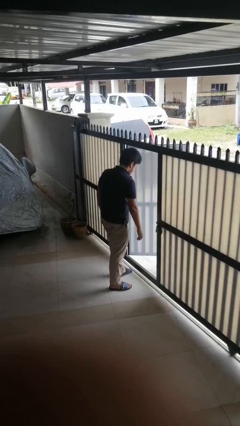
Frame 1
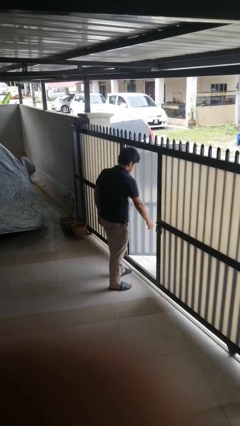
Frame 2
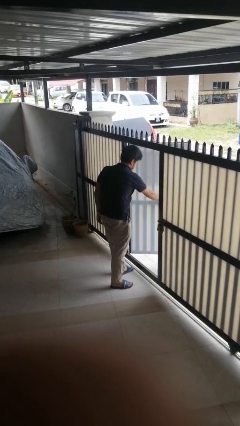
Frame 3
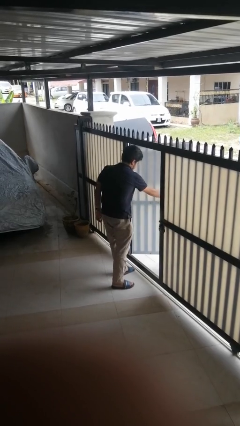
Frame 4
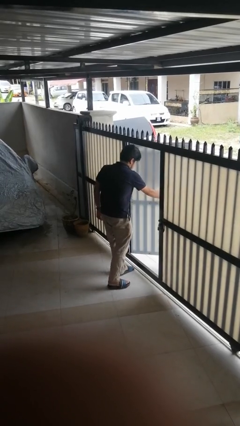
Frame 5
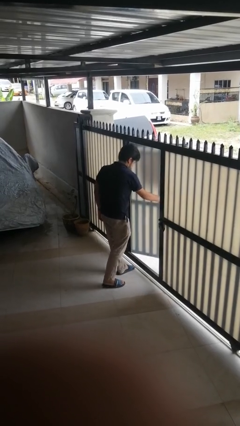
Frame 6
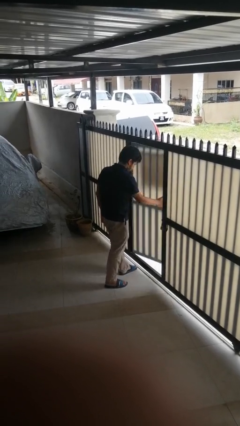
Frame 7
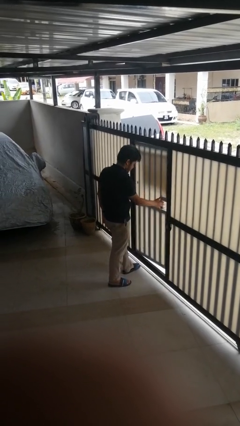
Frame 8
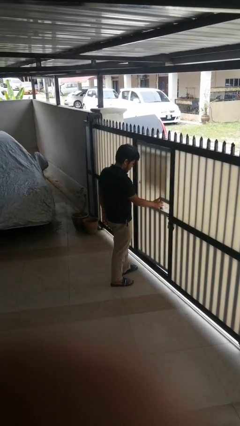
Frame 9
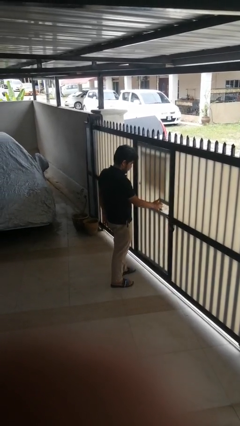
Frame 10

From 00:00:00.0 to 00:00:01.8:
person closes gate

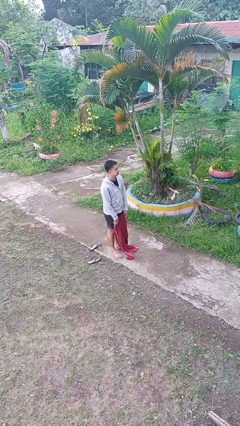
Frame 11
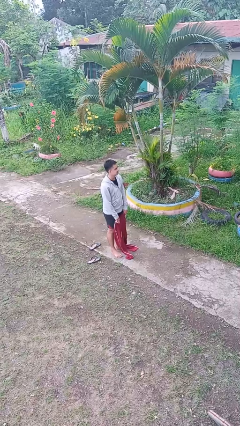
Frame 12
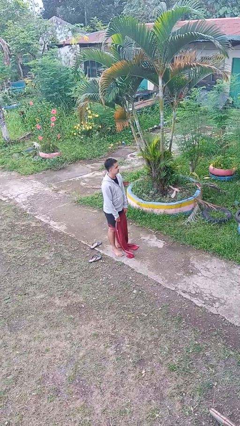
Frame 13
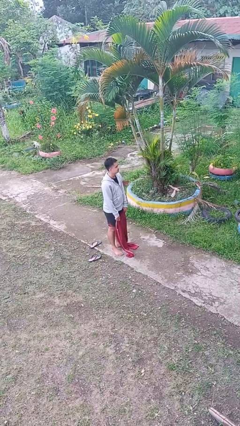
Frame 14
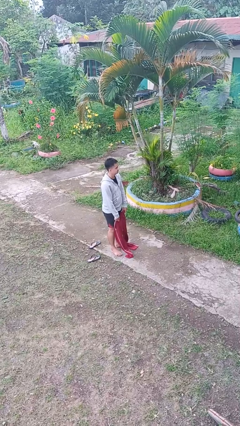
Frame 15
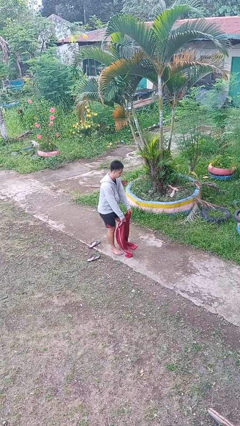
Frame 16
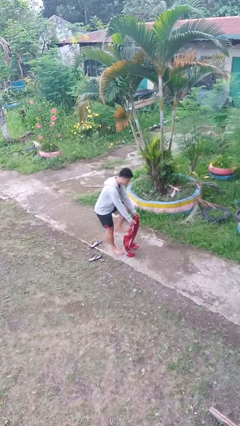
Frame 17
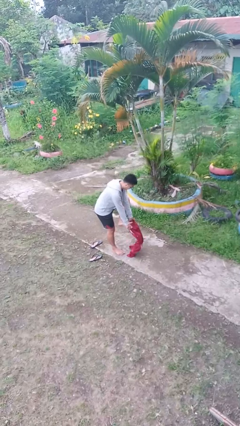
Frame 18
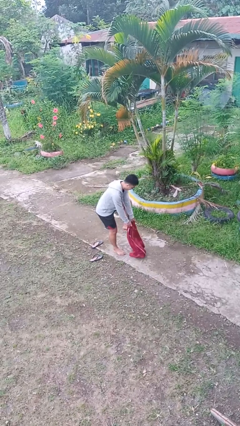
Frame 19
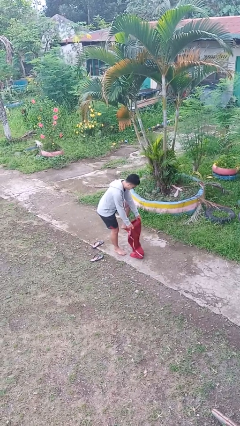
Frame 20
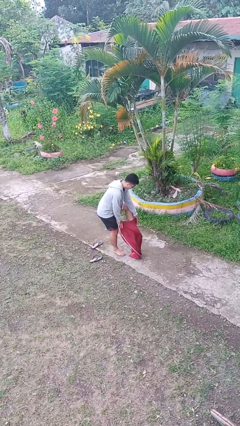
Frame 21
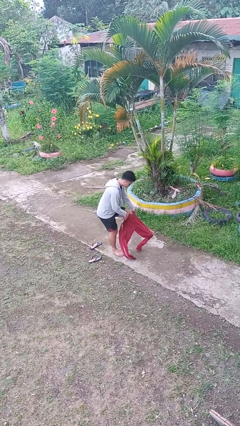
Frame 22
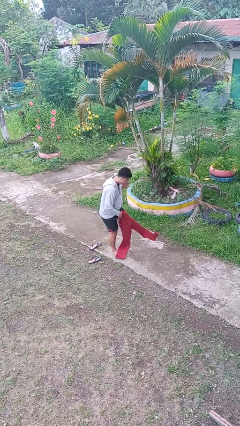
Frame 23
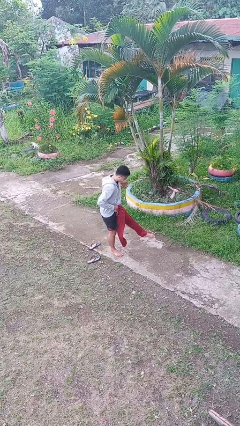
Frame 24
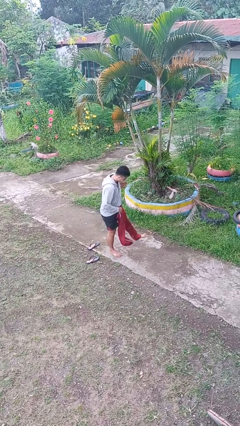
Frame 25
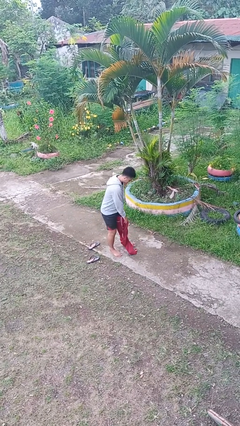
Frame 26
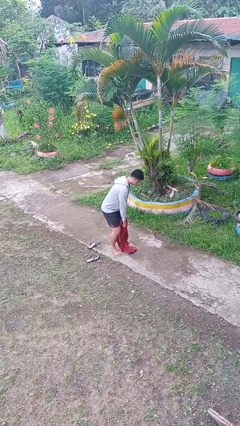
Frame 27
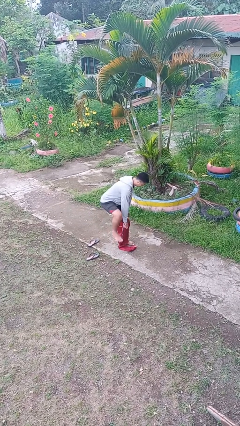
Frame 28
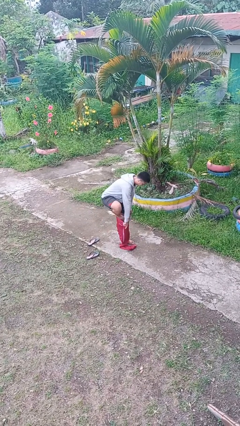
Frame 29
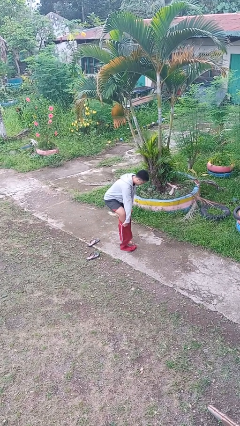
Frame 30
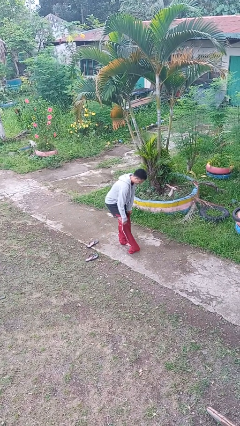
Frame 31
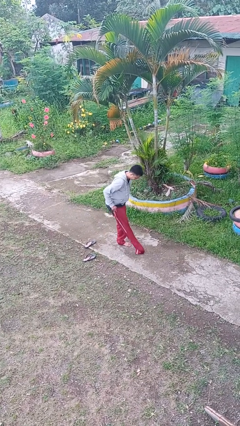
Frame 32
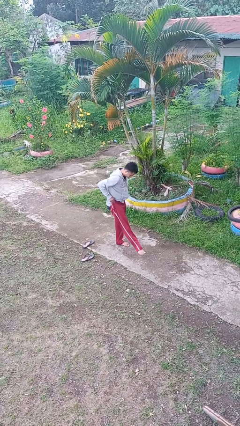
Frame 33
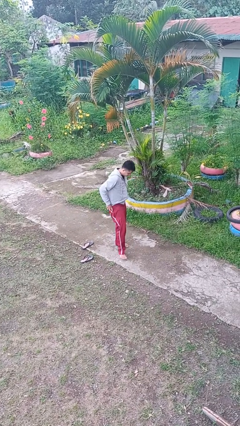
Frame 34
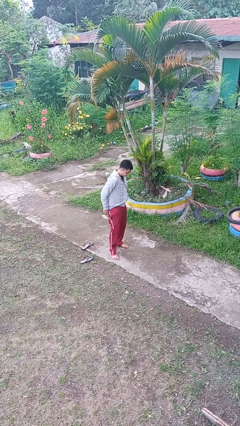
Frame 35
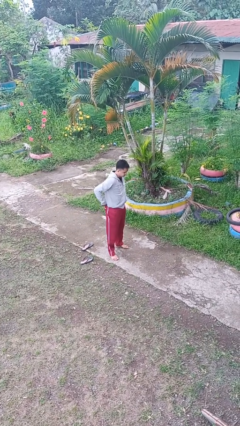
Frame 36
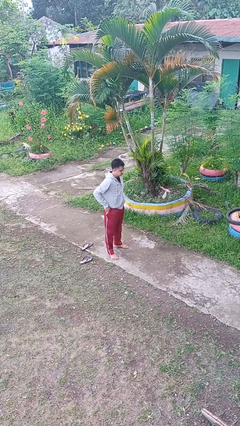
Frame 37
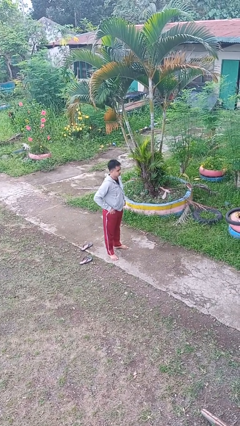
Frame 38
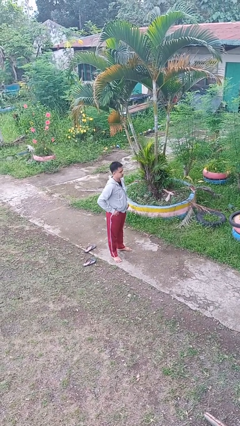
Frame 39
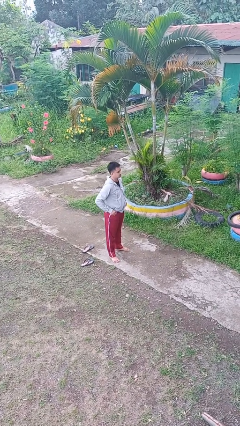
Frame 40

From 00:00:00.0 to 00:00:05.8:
person takes off pants

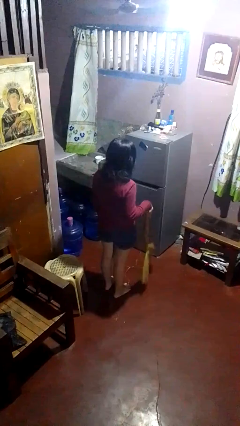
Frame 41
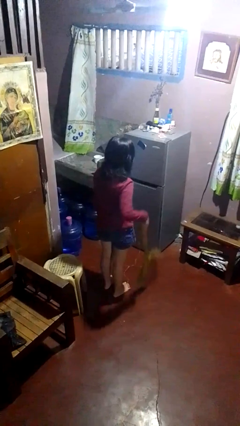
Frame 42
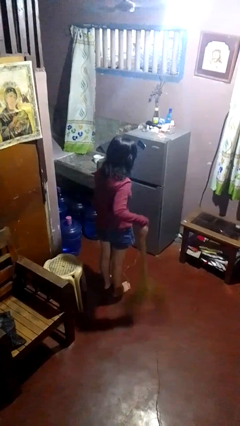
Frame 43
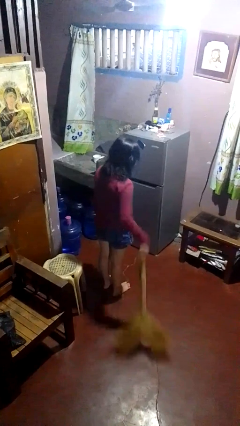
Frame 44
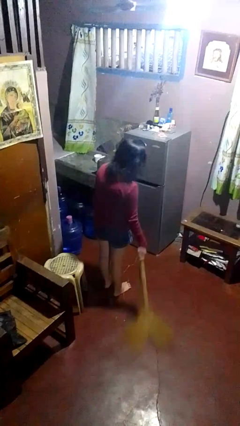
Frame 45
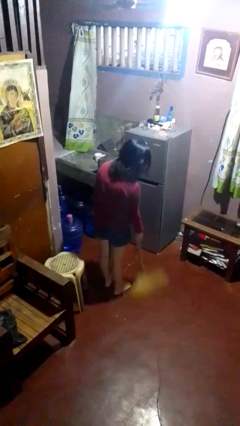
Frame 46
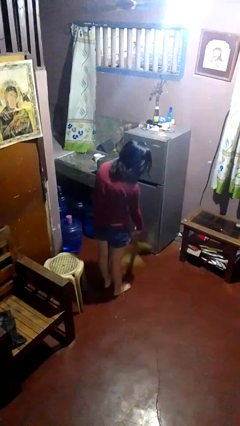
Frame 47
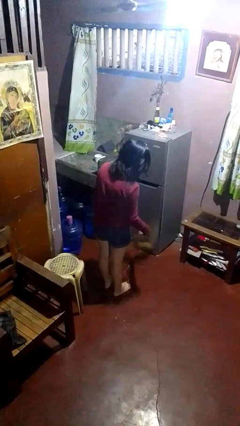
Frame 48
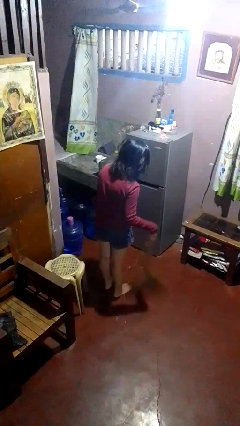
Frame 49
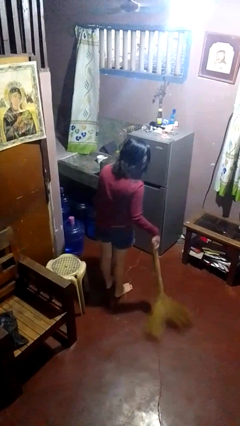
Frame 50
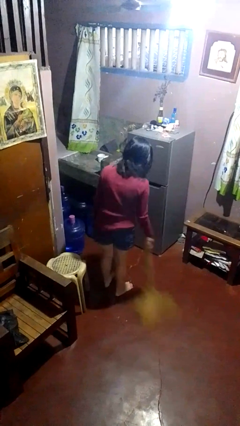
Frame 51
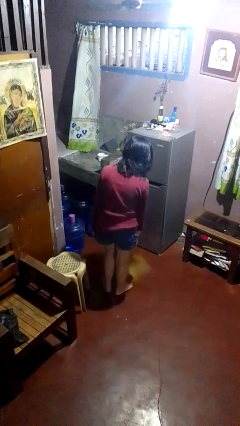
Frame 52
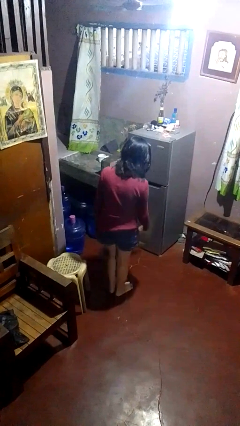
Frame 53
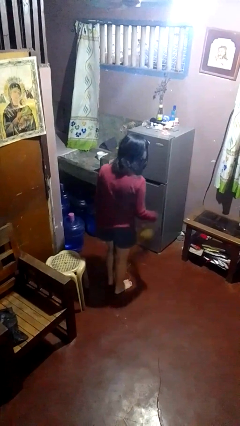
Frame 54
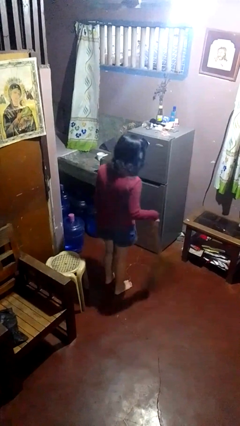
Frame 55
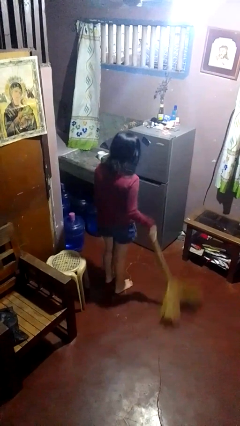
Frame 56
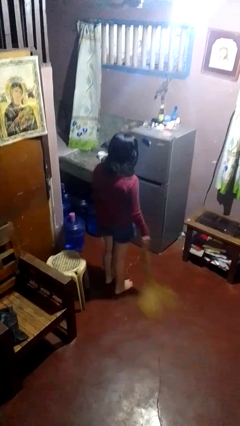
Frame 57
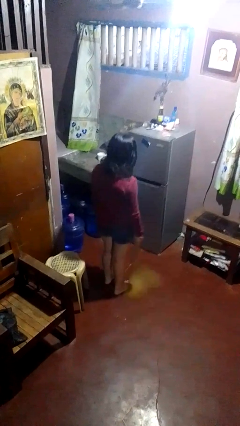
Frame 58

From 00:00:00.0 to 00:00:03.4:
person sweeps floor

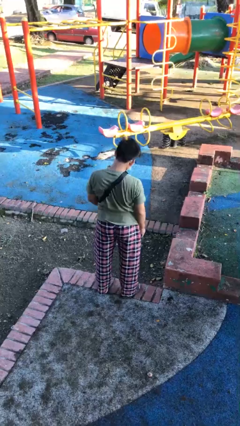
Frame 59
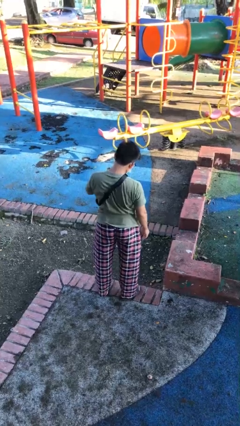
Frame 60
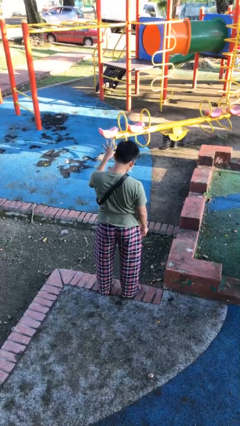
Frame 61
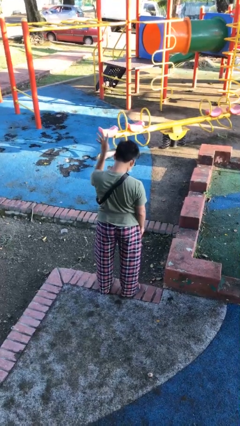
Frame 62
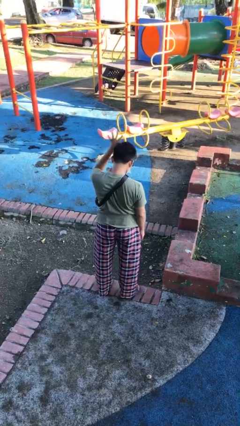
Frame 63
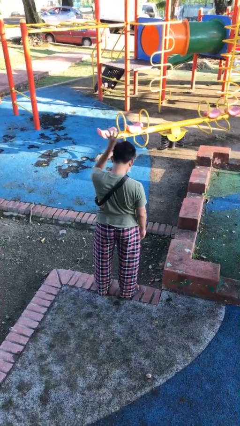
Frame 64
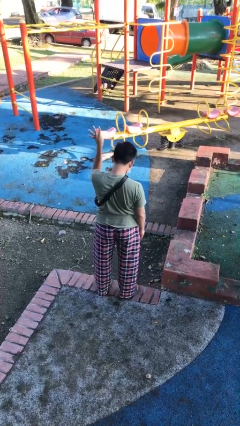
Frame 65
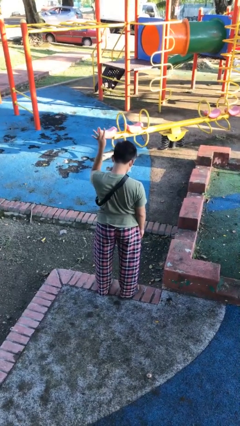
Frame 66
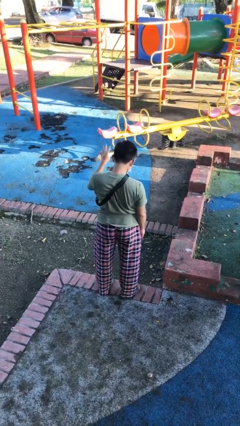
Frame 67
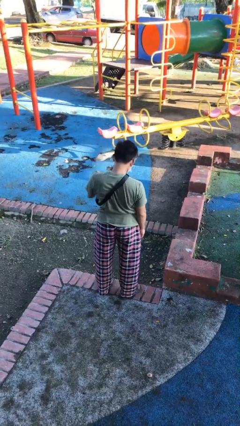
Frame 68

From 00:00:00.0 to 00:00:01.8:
person gestures number four

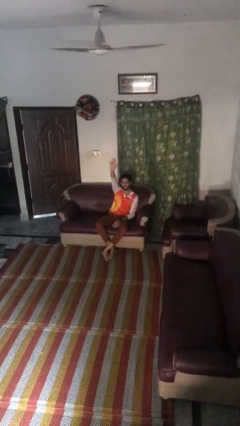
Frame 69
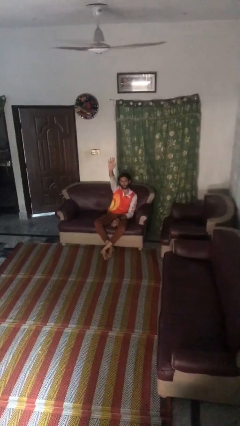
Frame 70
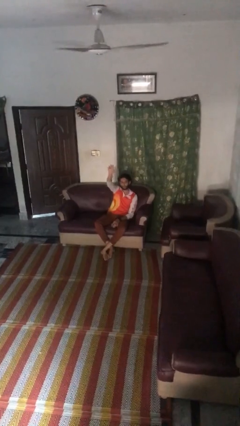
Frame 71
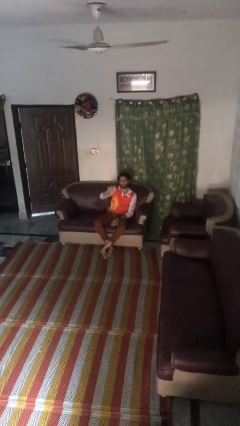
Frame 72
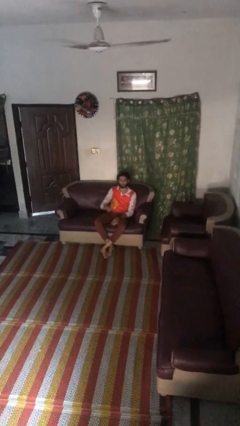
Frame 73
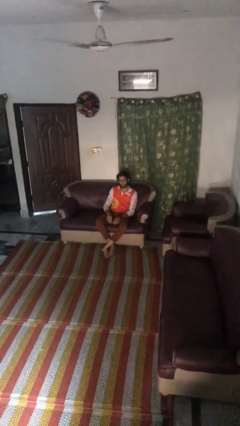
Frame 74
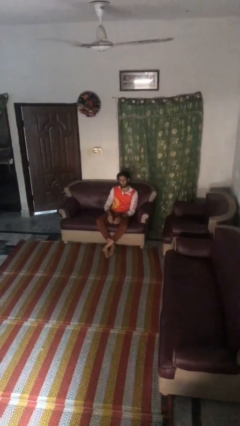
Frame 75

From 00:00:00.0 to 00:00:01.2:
person gestures lower hand

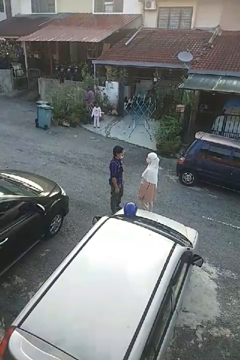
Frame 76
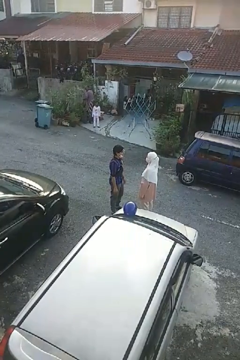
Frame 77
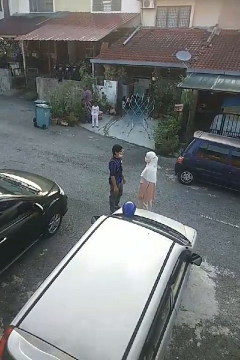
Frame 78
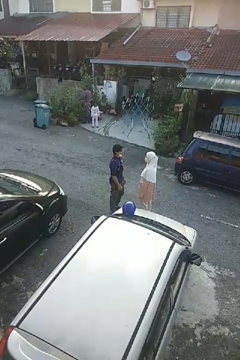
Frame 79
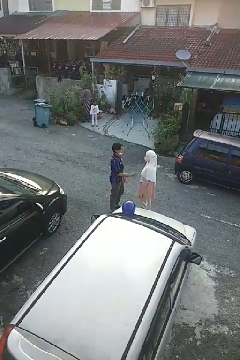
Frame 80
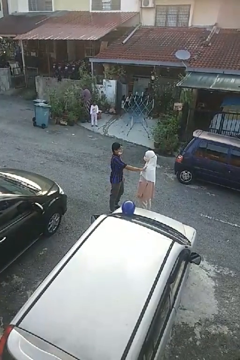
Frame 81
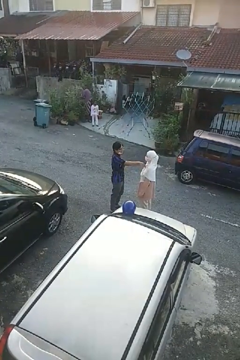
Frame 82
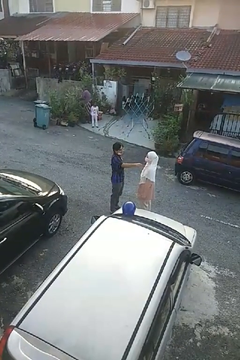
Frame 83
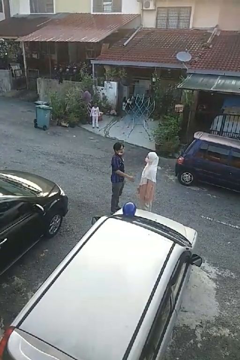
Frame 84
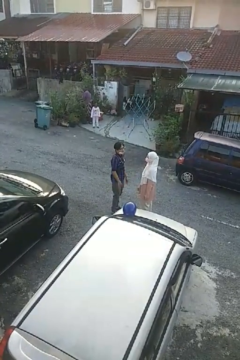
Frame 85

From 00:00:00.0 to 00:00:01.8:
person shoves person

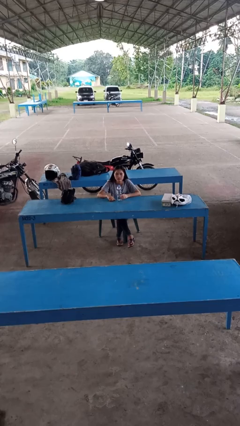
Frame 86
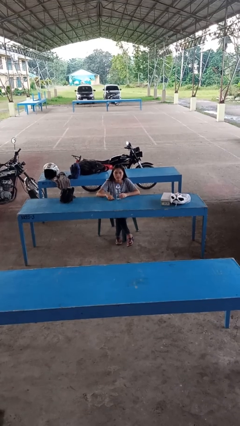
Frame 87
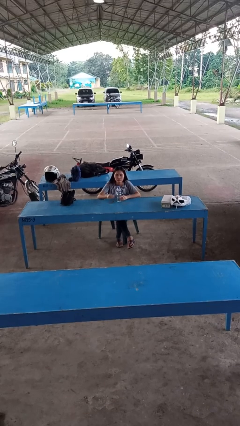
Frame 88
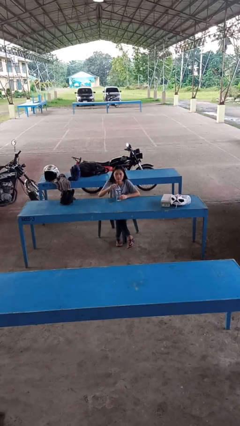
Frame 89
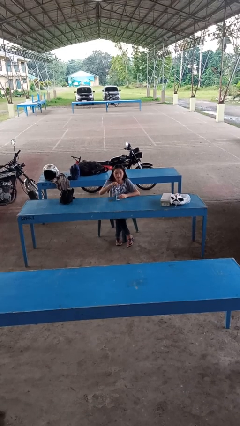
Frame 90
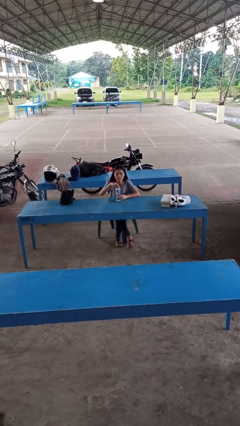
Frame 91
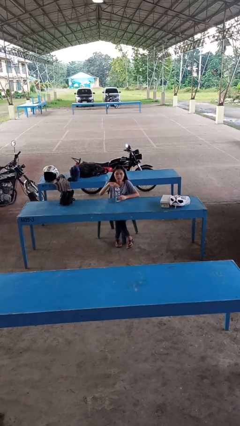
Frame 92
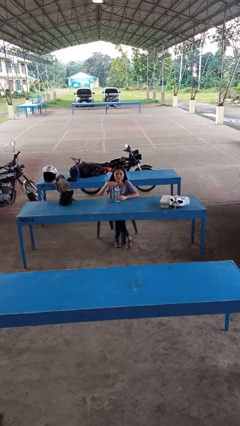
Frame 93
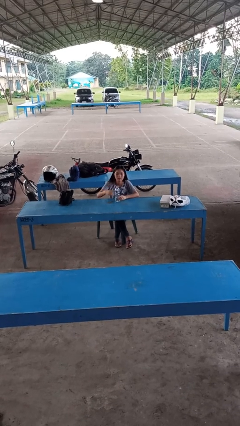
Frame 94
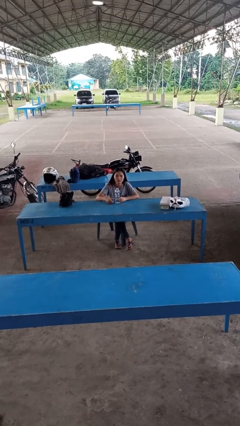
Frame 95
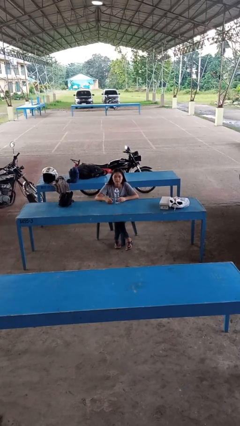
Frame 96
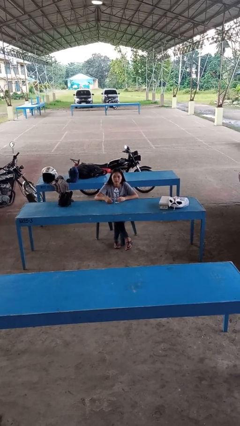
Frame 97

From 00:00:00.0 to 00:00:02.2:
person unscrews lid from bottle
